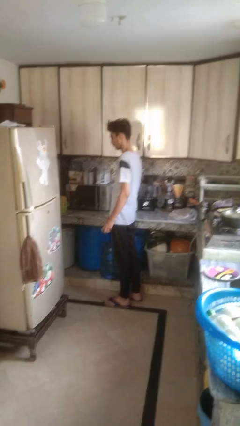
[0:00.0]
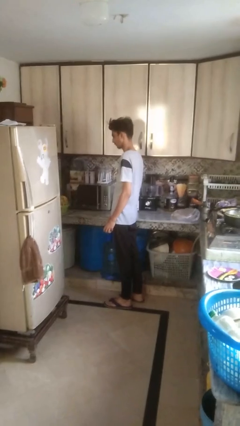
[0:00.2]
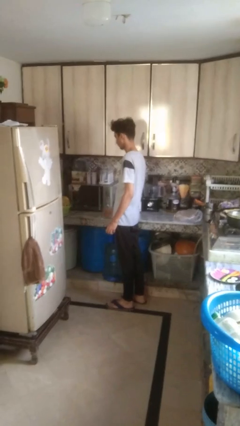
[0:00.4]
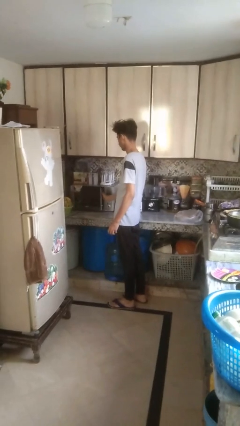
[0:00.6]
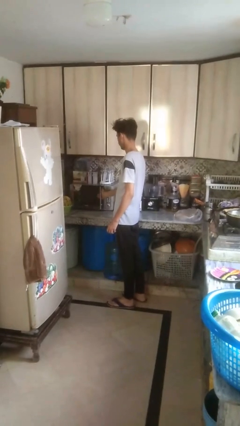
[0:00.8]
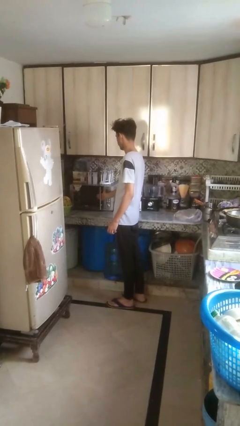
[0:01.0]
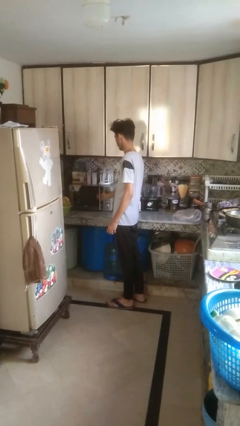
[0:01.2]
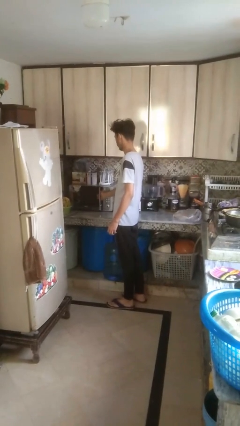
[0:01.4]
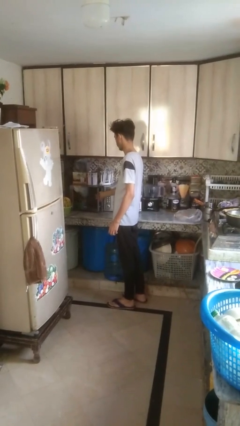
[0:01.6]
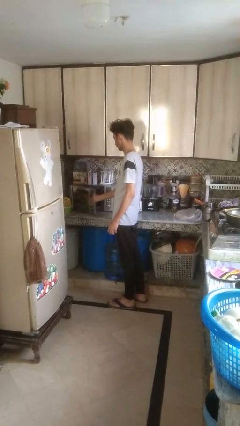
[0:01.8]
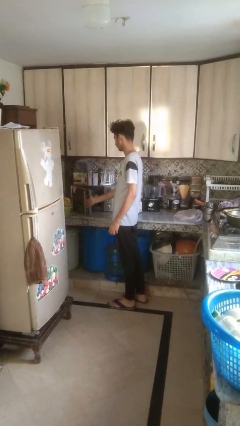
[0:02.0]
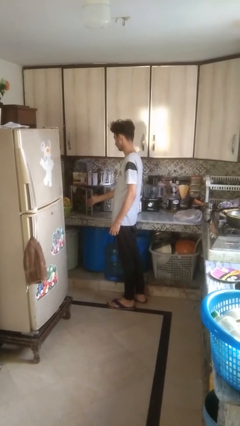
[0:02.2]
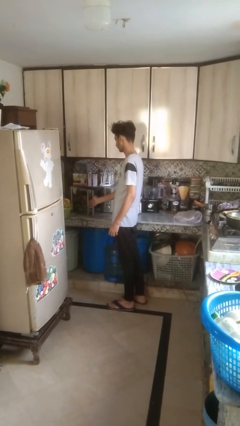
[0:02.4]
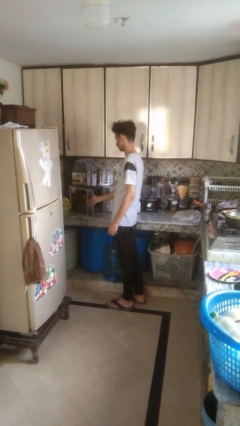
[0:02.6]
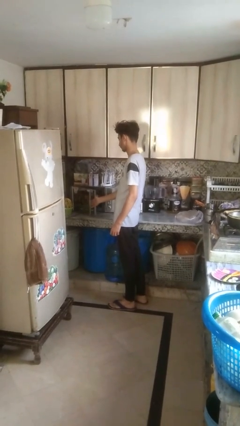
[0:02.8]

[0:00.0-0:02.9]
person opens oven door

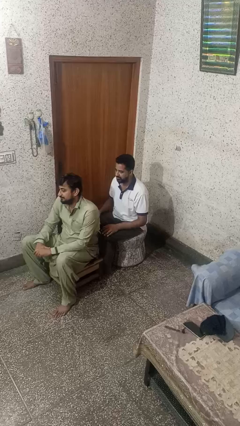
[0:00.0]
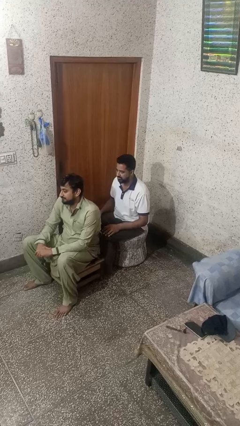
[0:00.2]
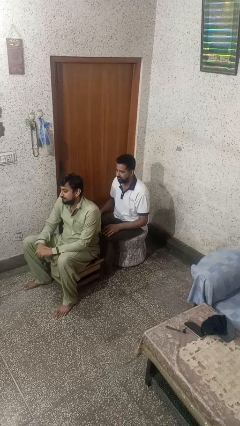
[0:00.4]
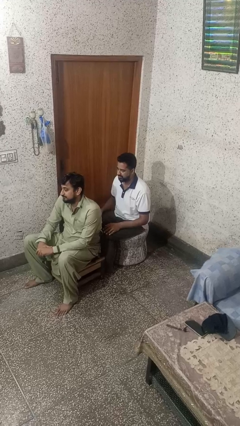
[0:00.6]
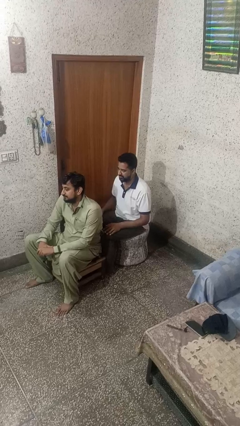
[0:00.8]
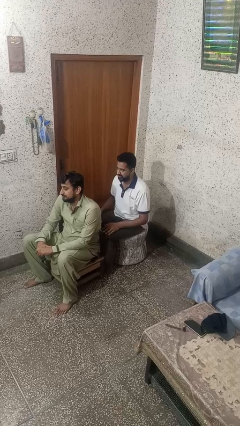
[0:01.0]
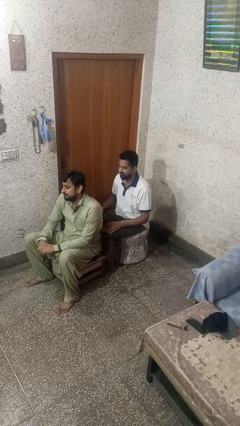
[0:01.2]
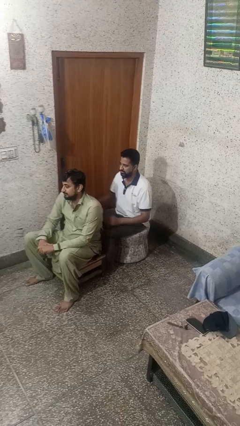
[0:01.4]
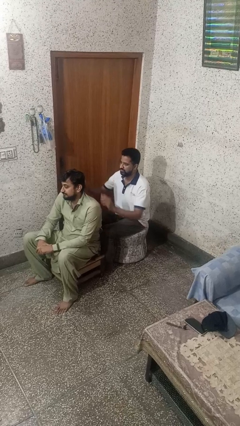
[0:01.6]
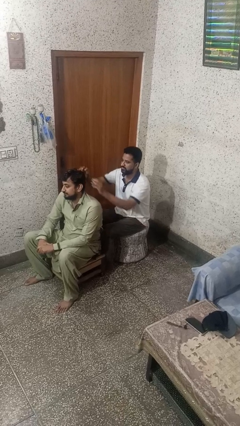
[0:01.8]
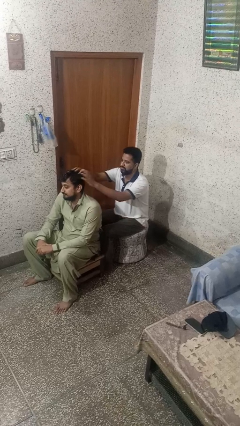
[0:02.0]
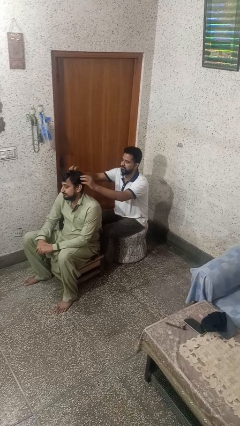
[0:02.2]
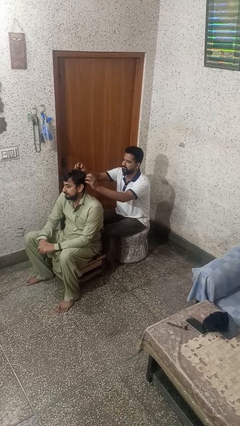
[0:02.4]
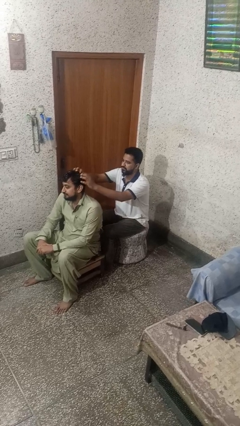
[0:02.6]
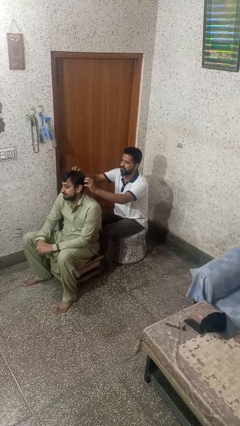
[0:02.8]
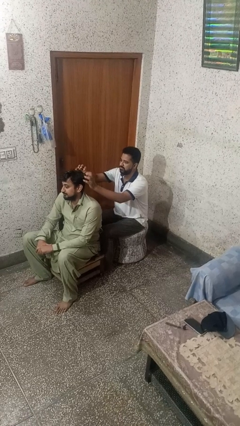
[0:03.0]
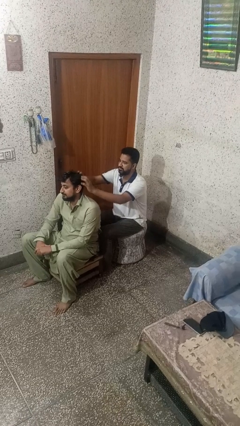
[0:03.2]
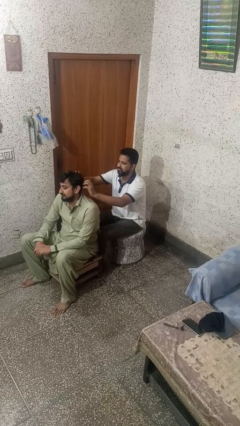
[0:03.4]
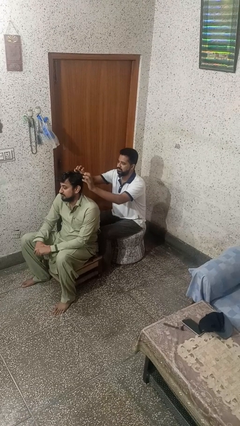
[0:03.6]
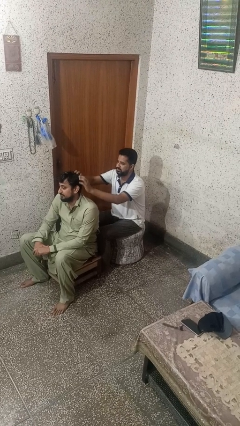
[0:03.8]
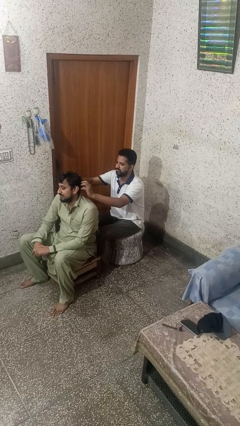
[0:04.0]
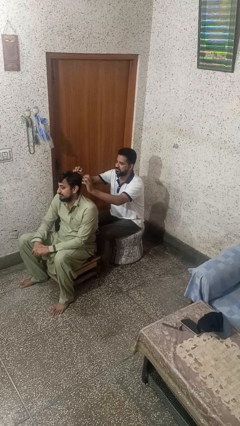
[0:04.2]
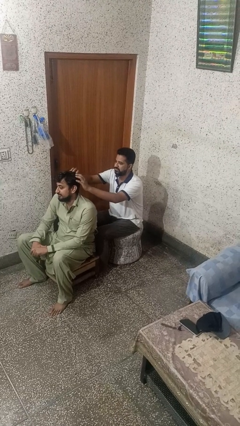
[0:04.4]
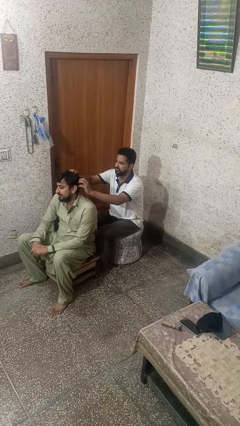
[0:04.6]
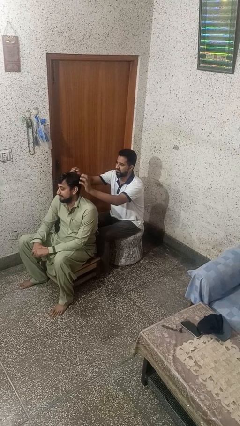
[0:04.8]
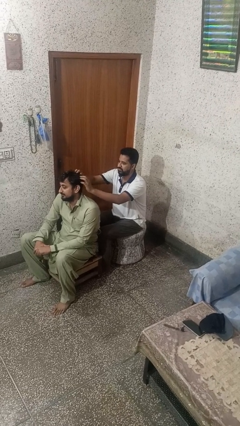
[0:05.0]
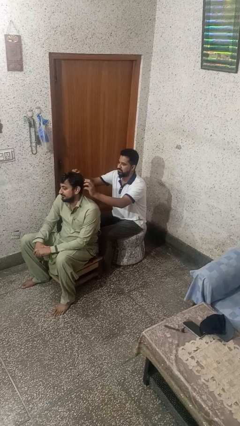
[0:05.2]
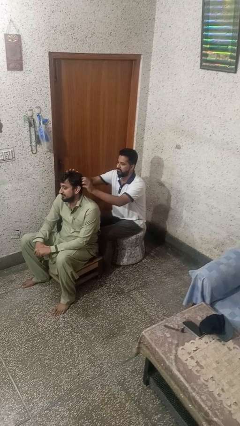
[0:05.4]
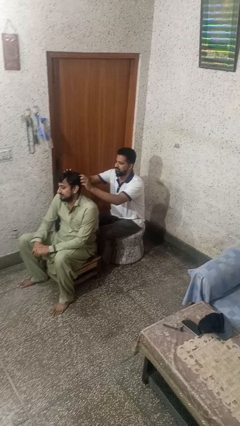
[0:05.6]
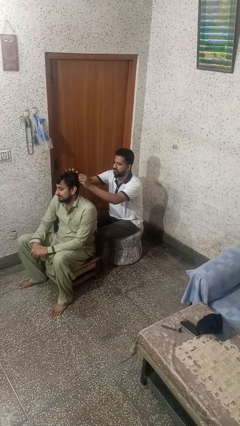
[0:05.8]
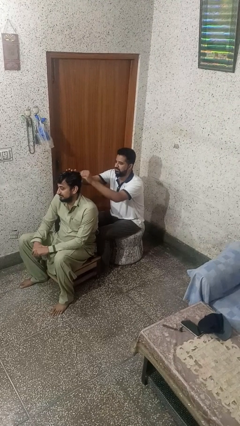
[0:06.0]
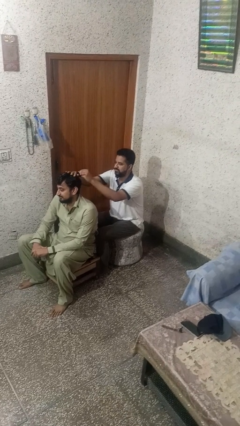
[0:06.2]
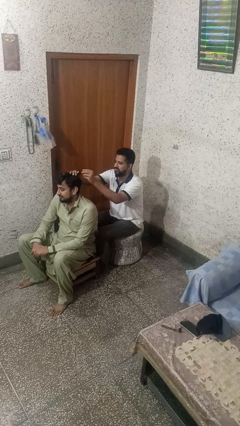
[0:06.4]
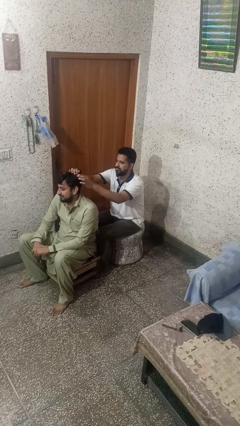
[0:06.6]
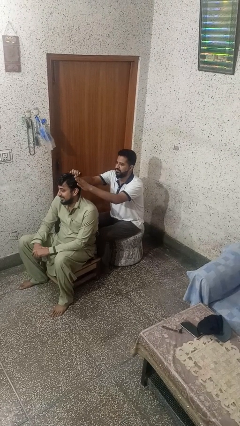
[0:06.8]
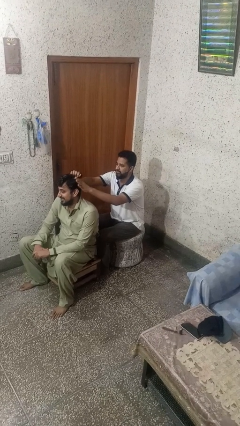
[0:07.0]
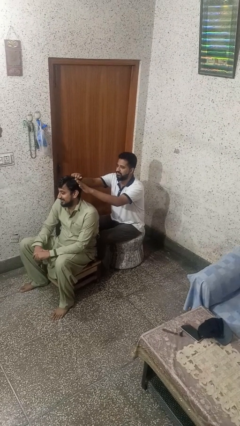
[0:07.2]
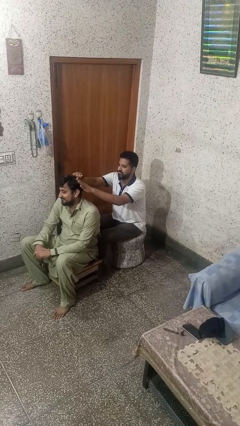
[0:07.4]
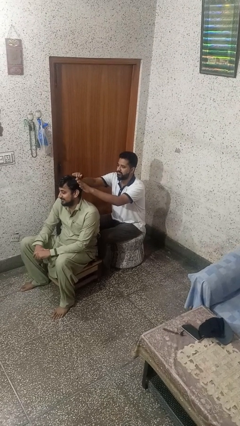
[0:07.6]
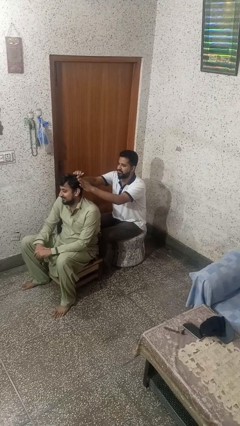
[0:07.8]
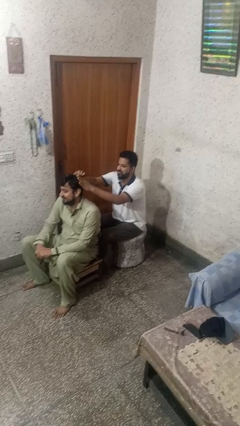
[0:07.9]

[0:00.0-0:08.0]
person braids hair of person

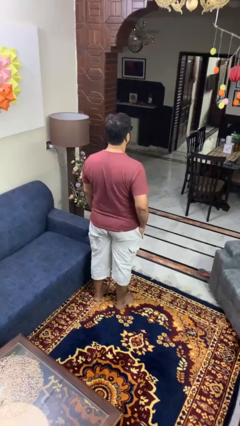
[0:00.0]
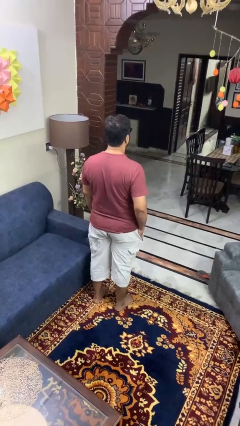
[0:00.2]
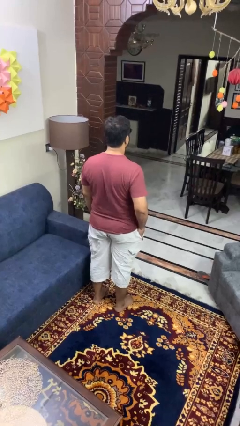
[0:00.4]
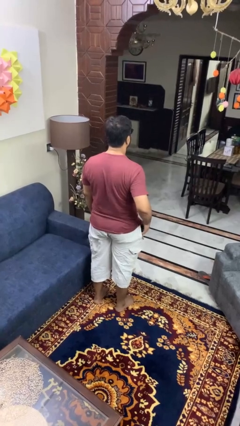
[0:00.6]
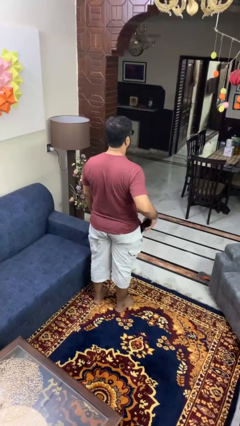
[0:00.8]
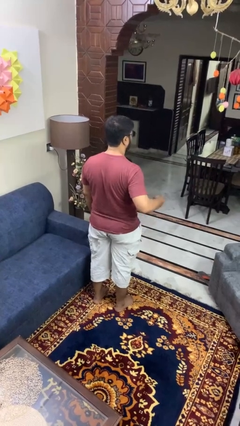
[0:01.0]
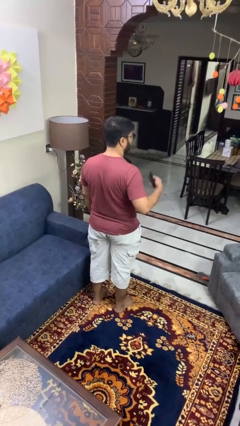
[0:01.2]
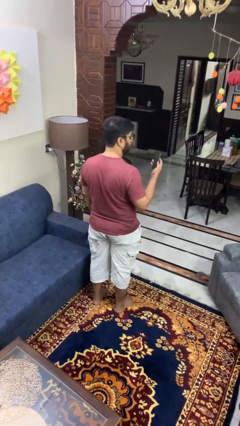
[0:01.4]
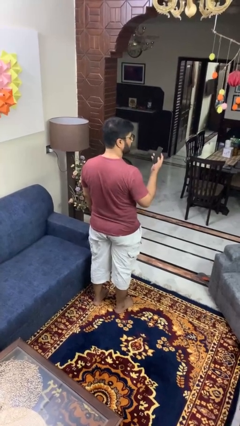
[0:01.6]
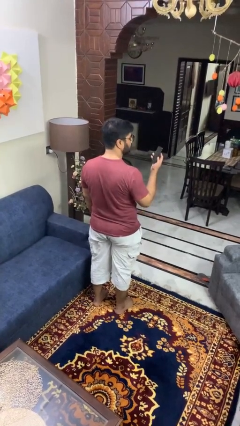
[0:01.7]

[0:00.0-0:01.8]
person takes phone from pocket

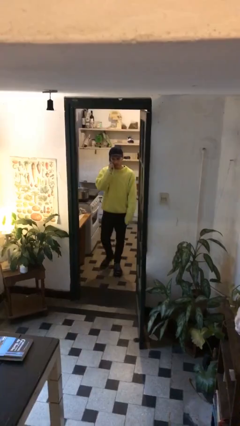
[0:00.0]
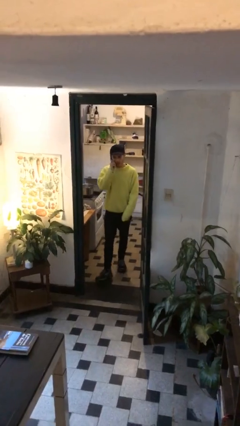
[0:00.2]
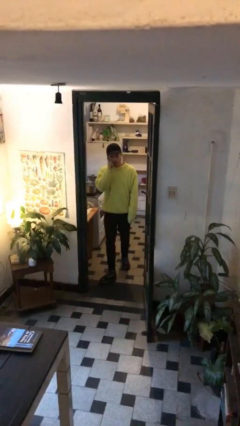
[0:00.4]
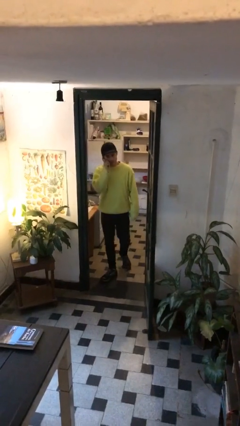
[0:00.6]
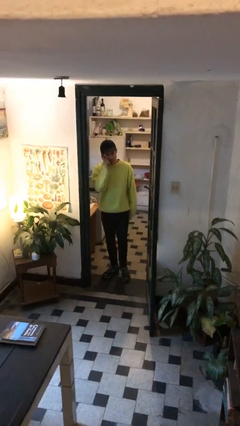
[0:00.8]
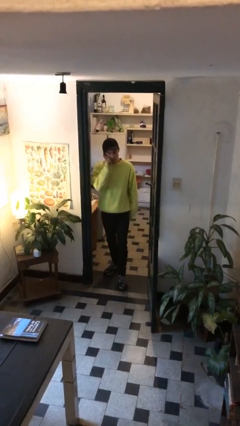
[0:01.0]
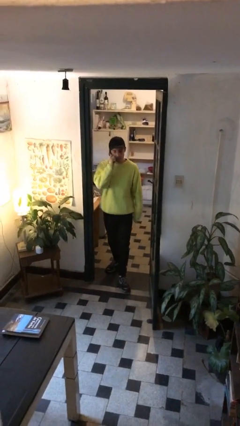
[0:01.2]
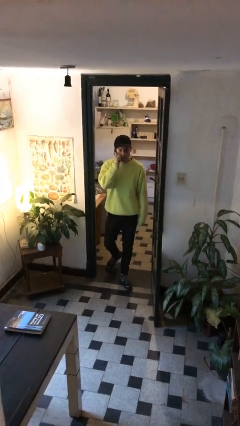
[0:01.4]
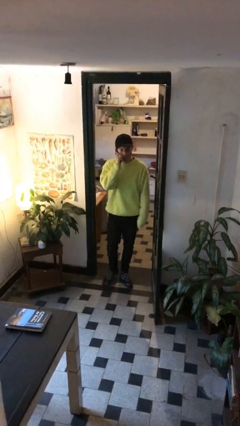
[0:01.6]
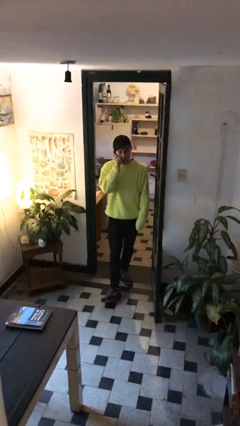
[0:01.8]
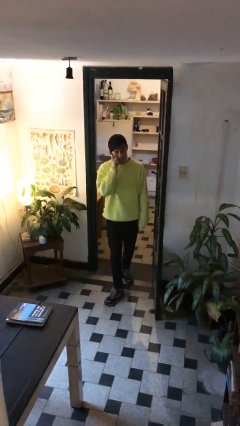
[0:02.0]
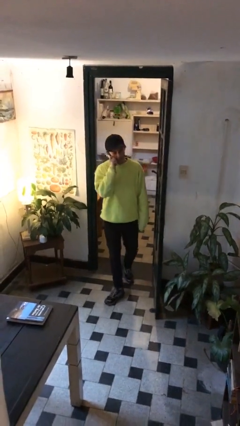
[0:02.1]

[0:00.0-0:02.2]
person enters scene through structure

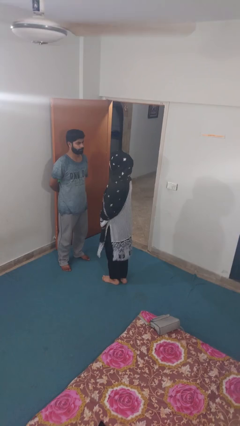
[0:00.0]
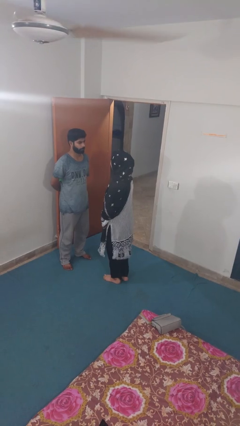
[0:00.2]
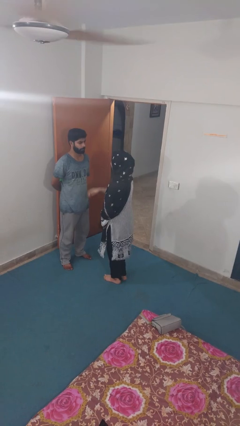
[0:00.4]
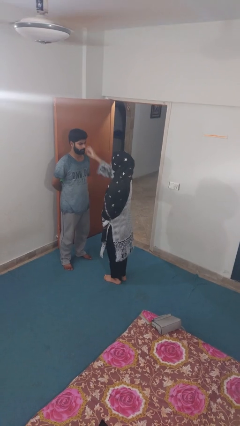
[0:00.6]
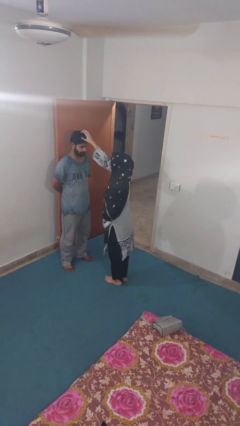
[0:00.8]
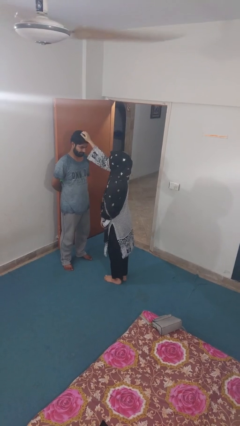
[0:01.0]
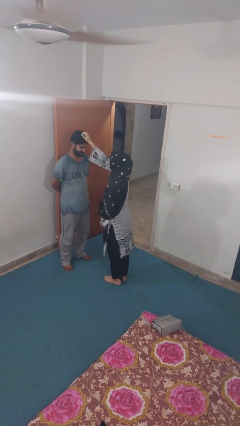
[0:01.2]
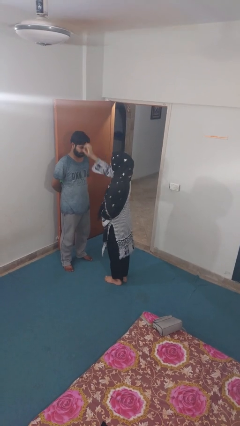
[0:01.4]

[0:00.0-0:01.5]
person grabs person by hair

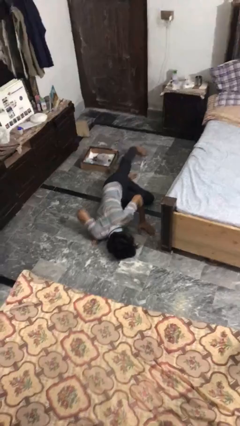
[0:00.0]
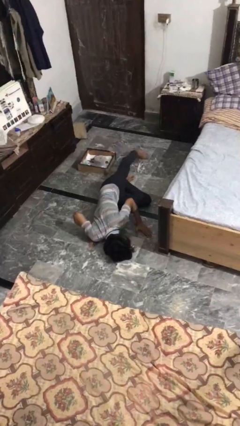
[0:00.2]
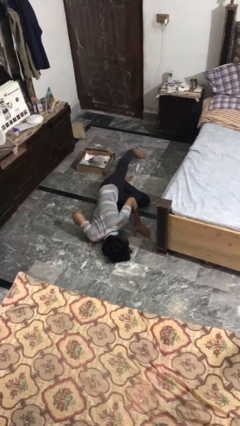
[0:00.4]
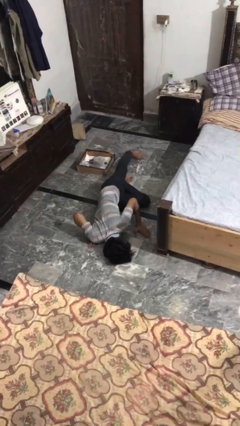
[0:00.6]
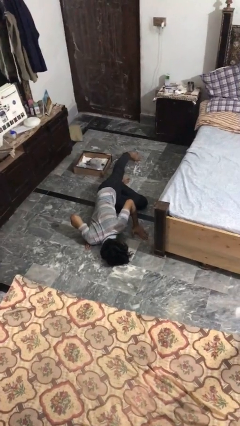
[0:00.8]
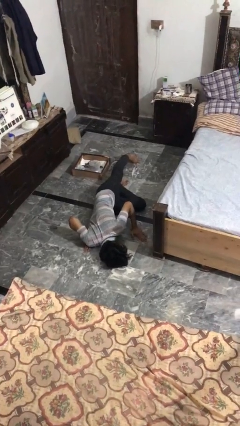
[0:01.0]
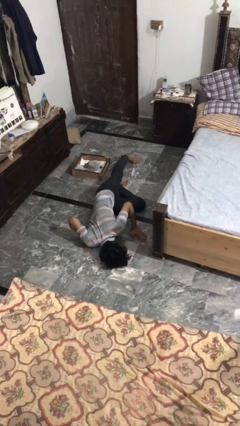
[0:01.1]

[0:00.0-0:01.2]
person lies down on floor
